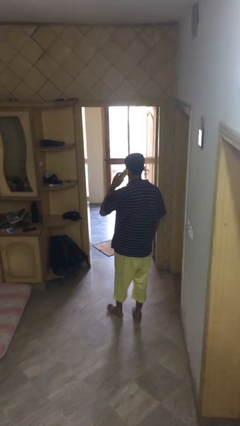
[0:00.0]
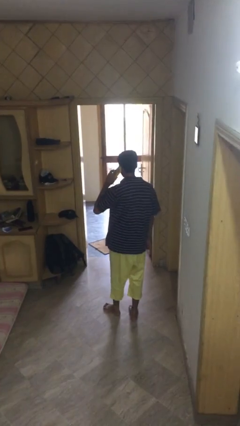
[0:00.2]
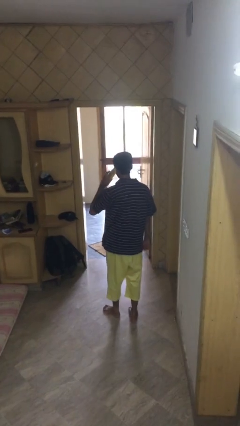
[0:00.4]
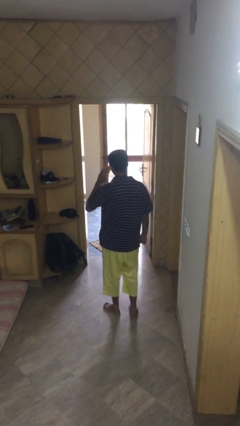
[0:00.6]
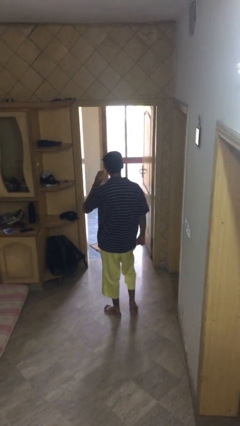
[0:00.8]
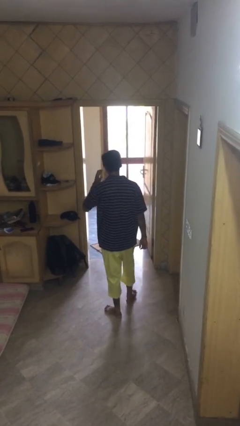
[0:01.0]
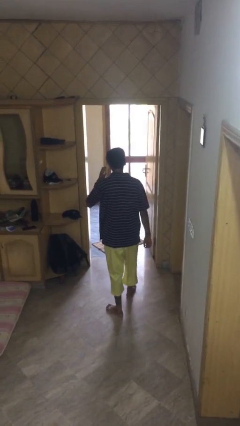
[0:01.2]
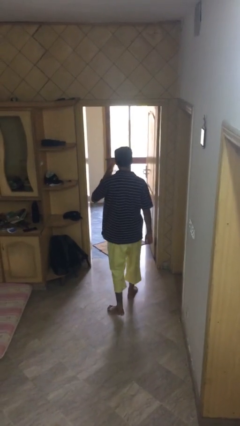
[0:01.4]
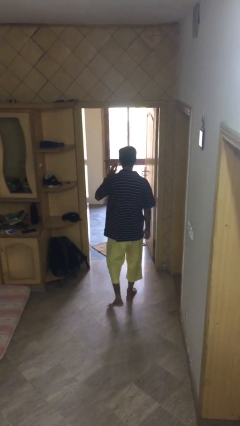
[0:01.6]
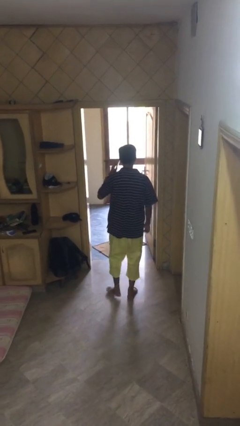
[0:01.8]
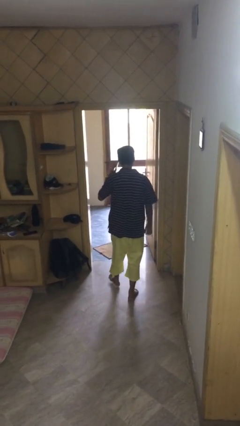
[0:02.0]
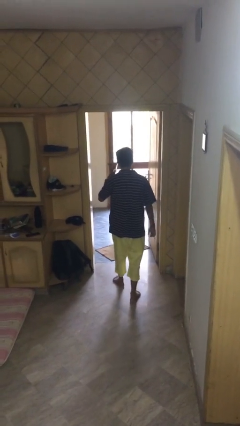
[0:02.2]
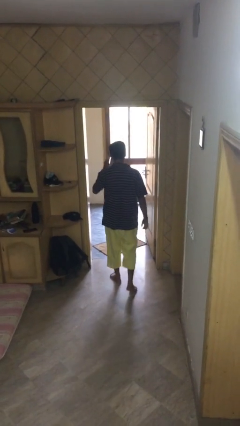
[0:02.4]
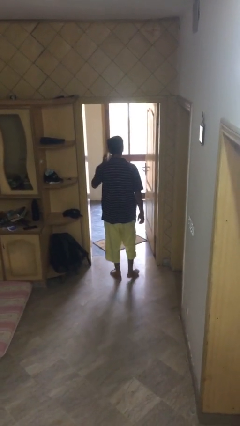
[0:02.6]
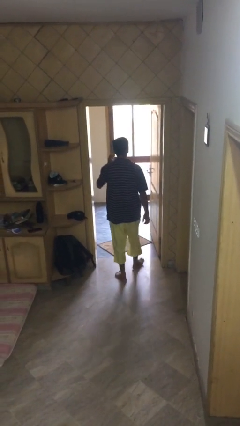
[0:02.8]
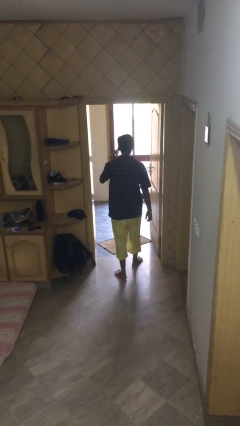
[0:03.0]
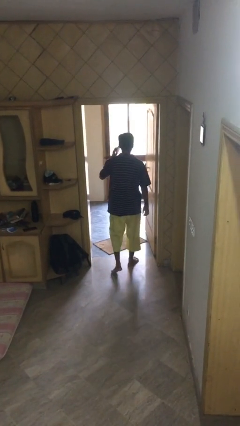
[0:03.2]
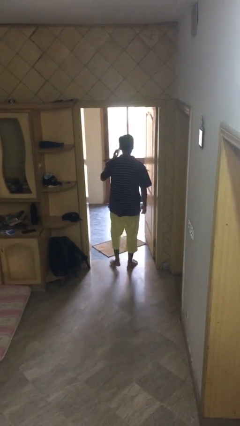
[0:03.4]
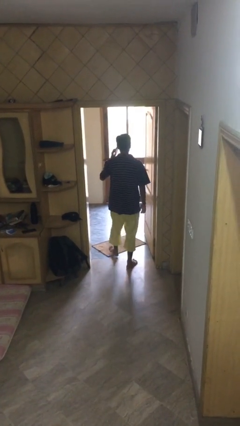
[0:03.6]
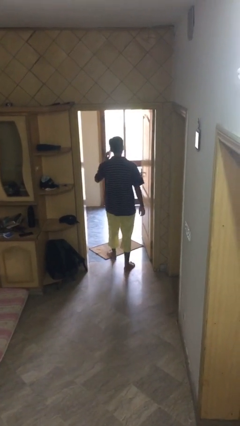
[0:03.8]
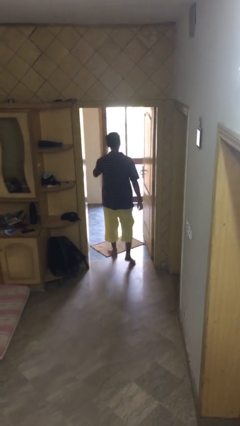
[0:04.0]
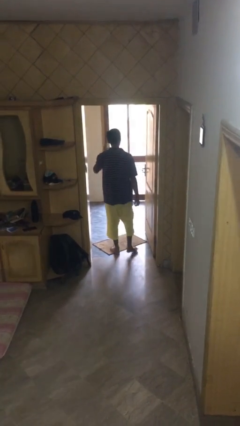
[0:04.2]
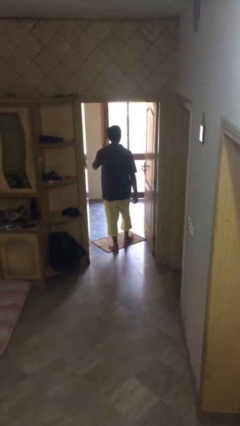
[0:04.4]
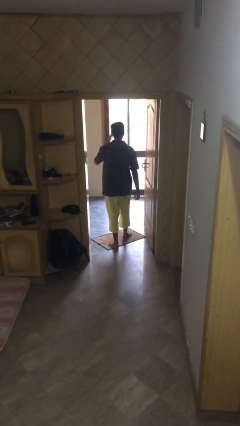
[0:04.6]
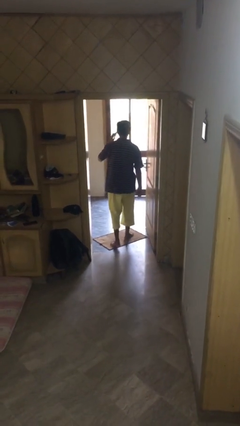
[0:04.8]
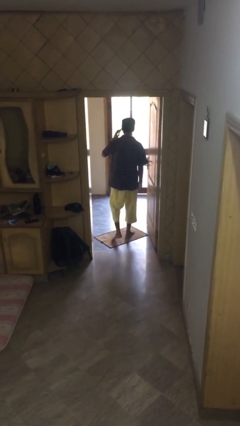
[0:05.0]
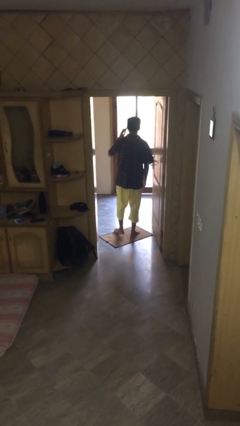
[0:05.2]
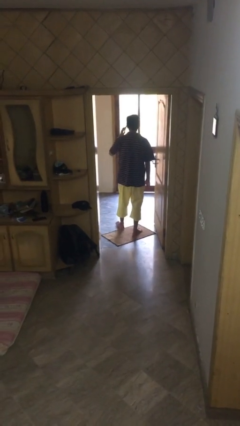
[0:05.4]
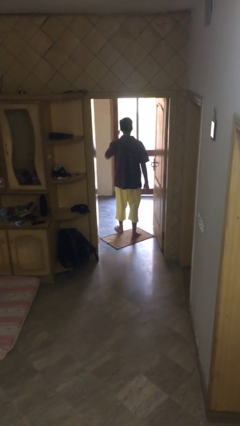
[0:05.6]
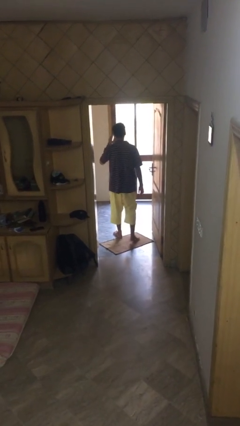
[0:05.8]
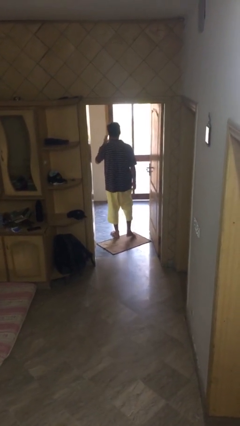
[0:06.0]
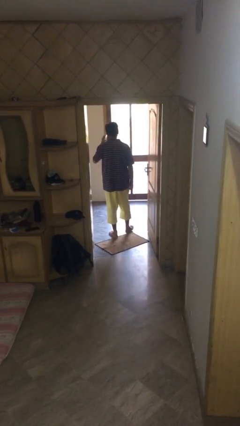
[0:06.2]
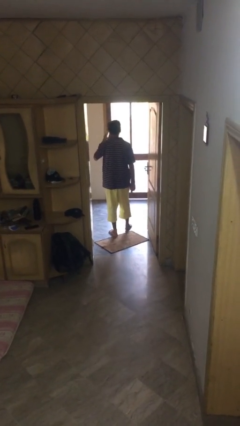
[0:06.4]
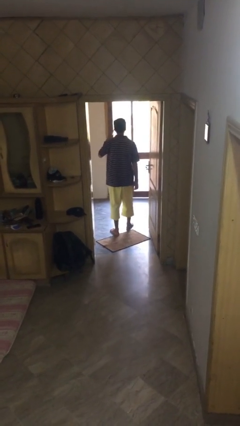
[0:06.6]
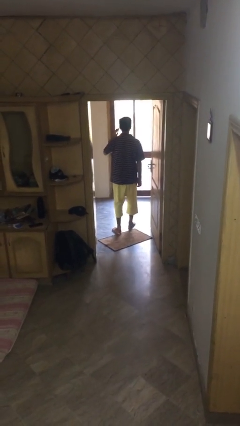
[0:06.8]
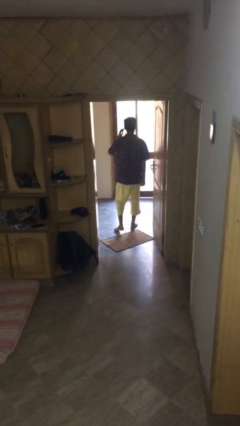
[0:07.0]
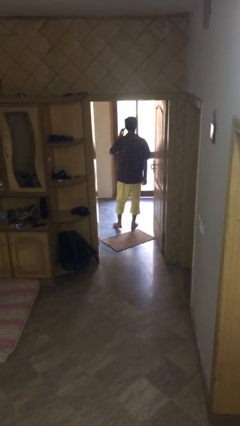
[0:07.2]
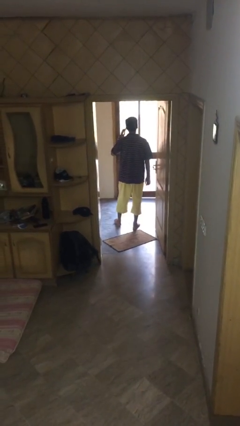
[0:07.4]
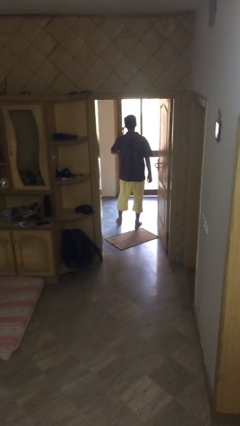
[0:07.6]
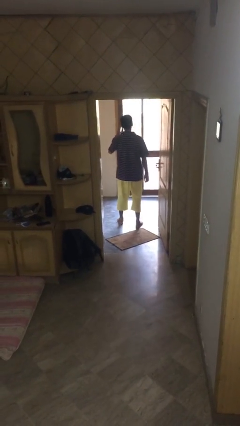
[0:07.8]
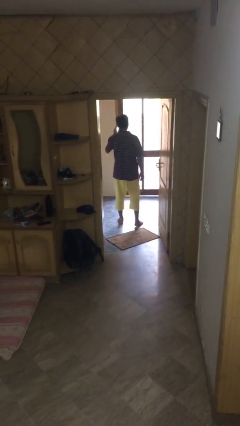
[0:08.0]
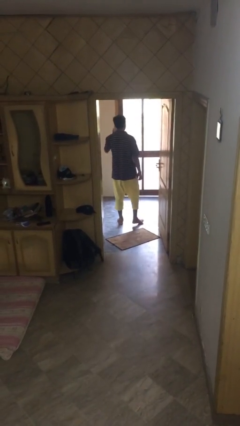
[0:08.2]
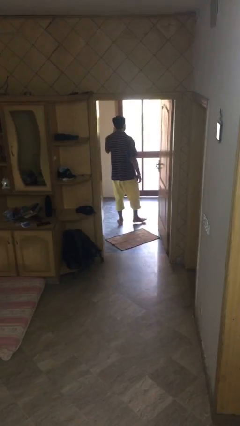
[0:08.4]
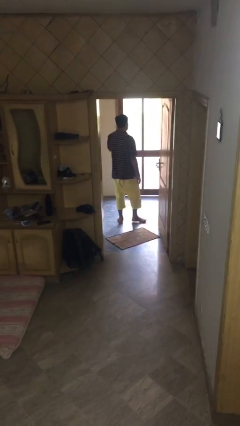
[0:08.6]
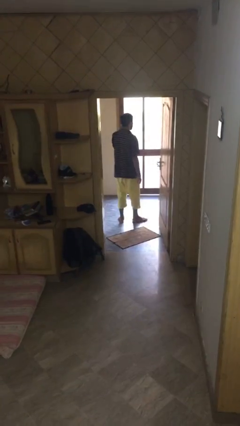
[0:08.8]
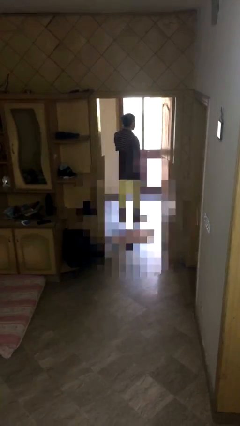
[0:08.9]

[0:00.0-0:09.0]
person exits scene through structure

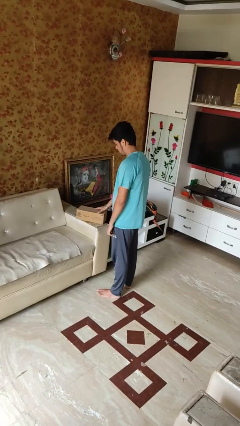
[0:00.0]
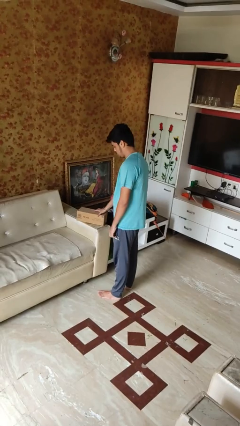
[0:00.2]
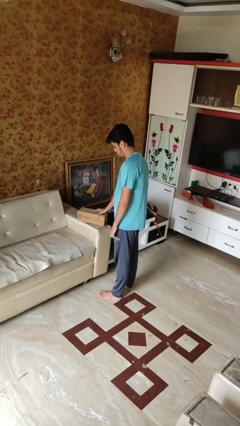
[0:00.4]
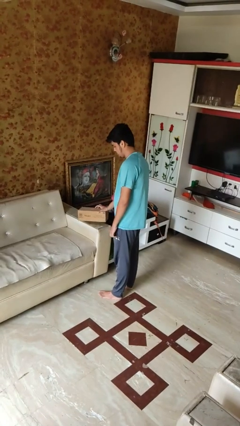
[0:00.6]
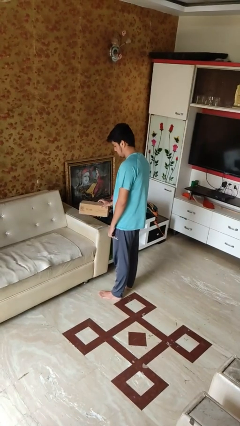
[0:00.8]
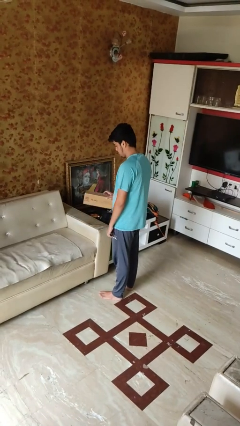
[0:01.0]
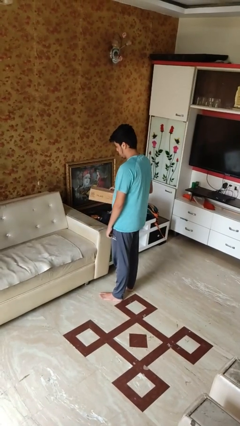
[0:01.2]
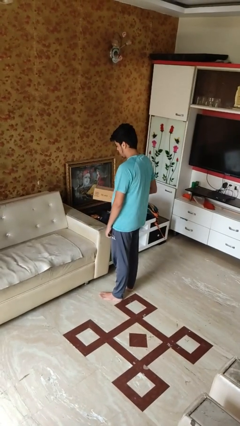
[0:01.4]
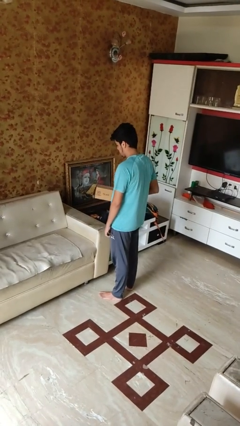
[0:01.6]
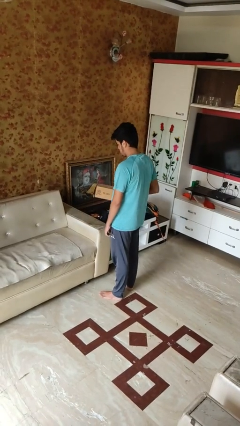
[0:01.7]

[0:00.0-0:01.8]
person picks up object from couch

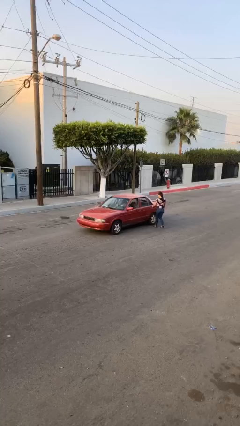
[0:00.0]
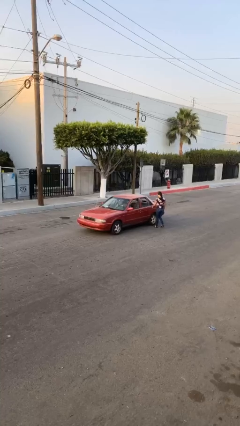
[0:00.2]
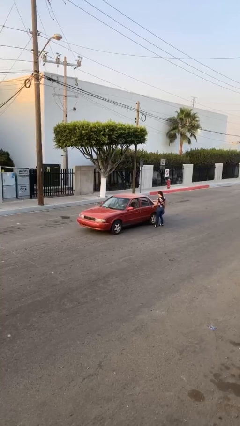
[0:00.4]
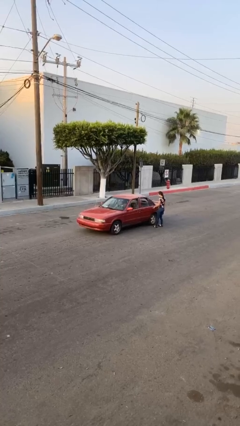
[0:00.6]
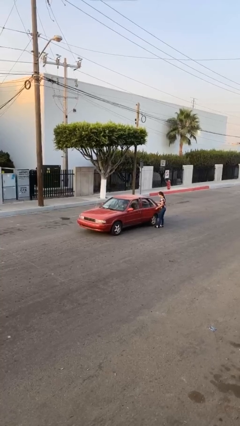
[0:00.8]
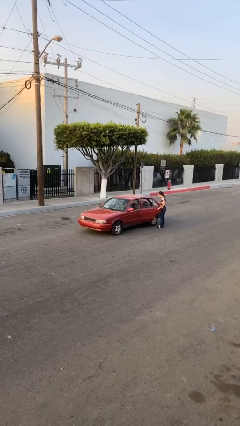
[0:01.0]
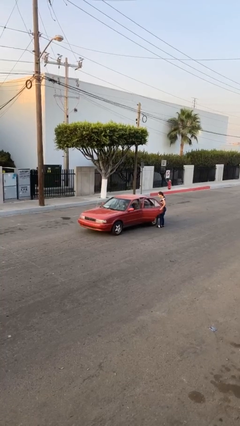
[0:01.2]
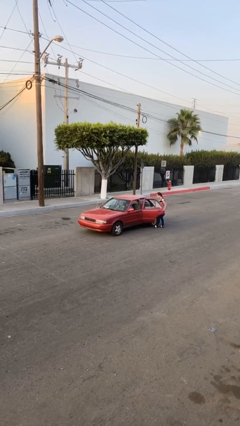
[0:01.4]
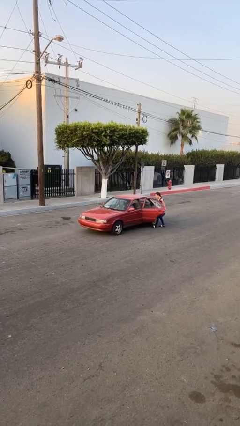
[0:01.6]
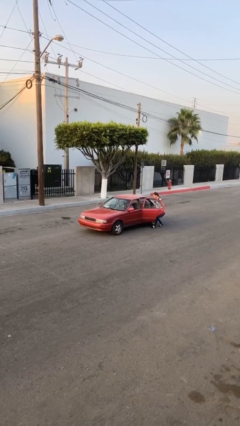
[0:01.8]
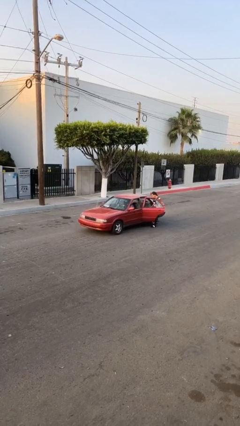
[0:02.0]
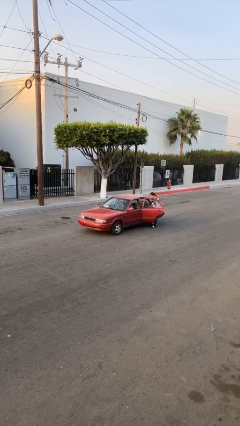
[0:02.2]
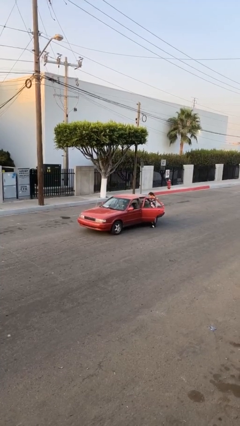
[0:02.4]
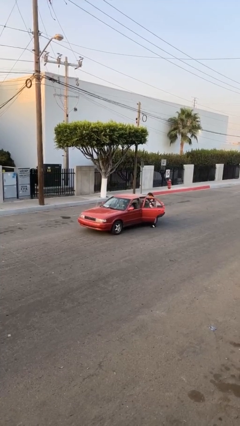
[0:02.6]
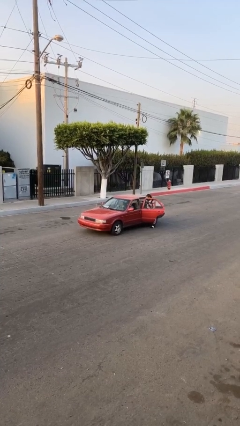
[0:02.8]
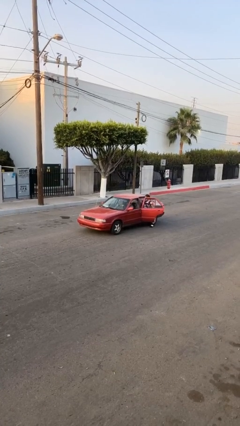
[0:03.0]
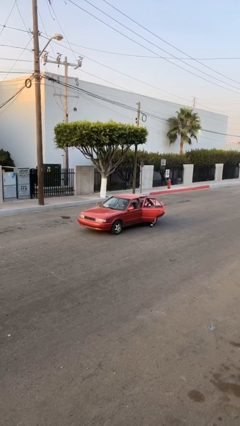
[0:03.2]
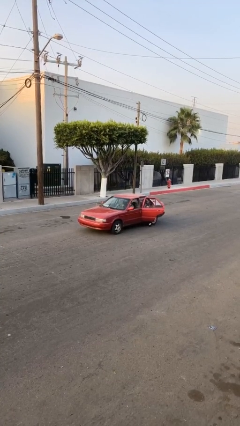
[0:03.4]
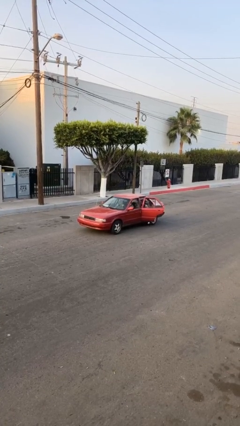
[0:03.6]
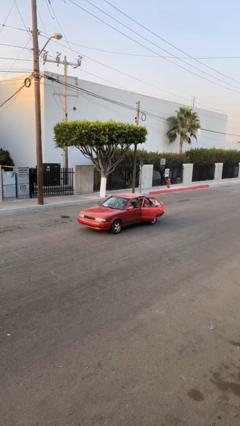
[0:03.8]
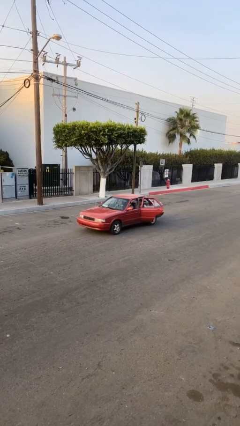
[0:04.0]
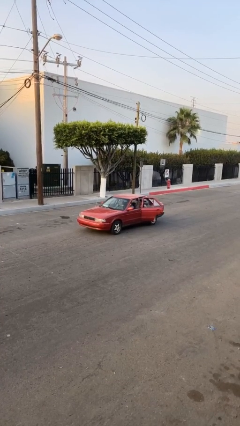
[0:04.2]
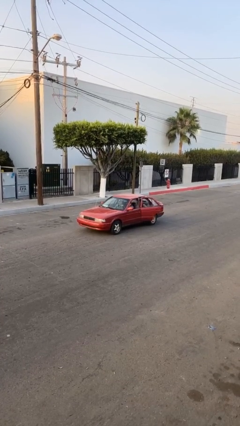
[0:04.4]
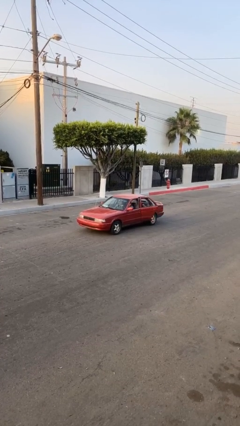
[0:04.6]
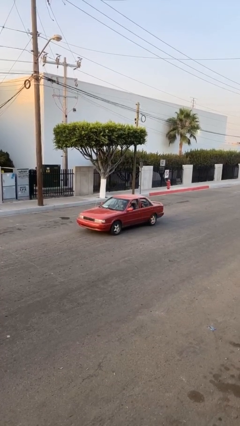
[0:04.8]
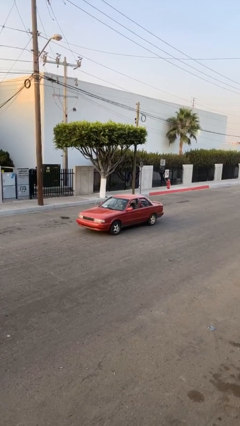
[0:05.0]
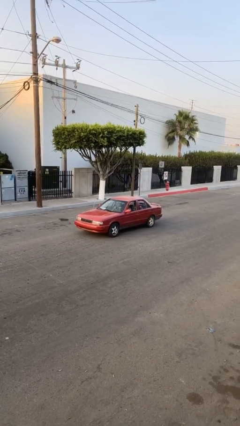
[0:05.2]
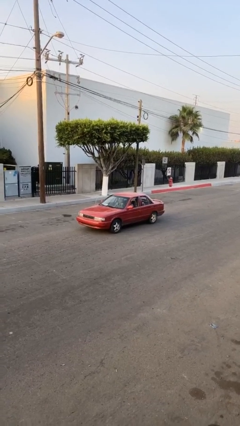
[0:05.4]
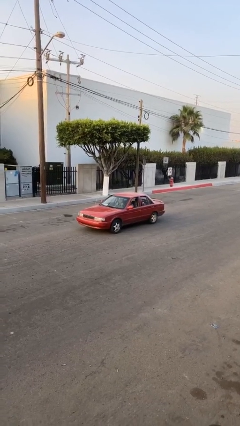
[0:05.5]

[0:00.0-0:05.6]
car picks up person

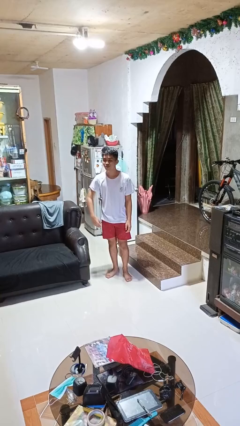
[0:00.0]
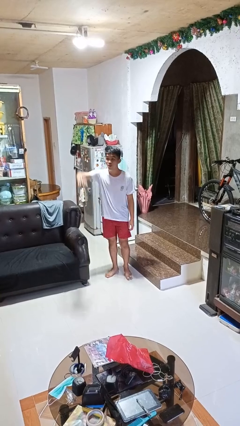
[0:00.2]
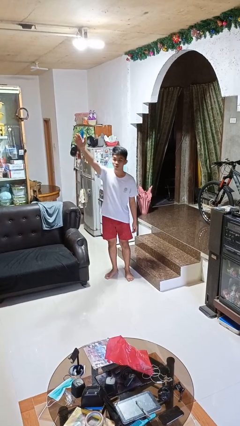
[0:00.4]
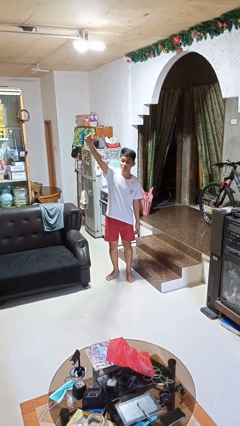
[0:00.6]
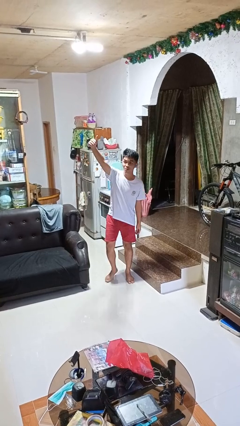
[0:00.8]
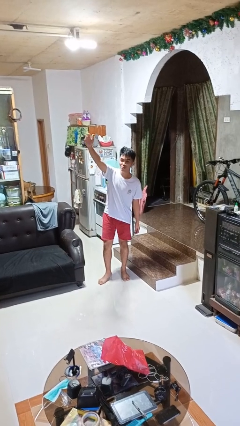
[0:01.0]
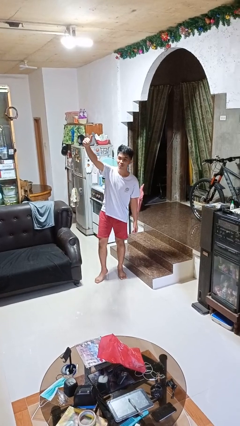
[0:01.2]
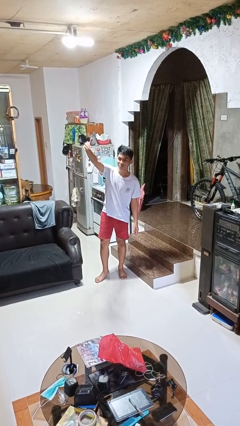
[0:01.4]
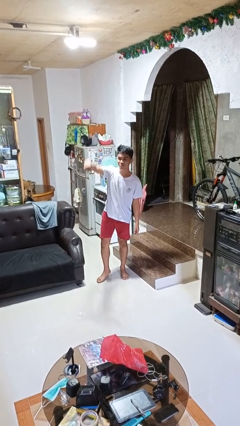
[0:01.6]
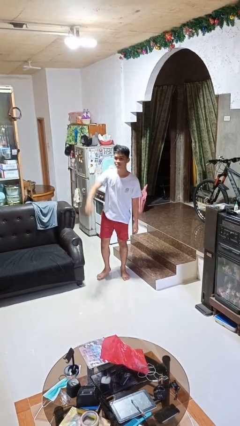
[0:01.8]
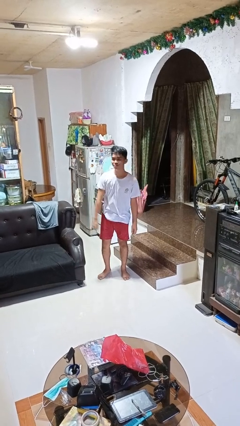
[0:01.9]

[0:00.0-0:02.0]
person gestures come here
